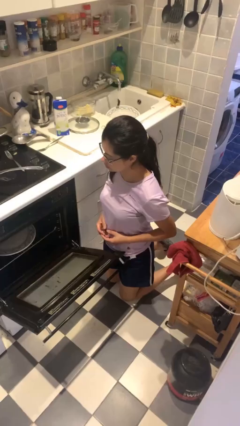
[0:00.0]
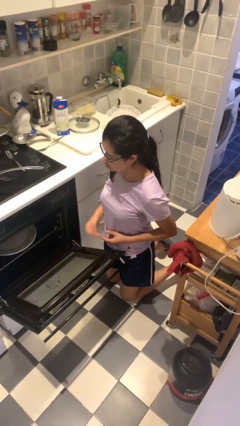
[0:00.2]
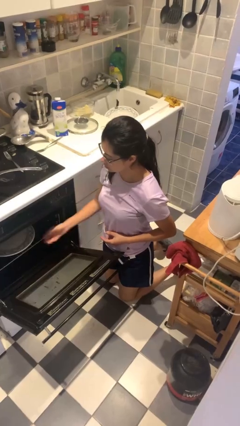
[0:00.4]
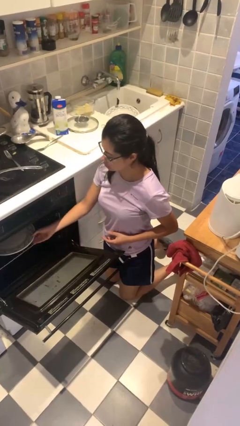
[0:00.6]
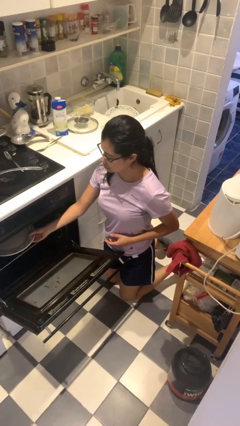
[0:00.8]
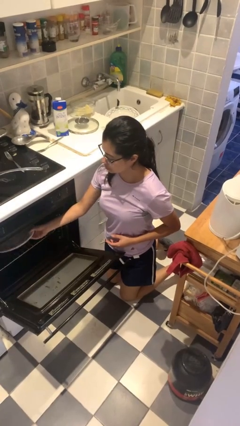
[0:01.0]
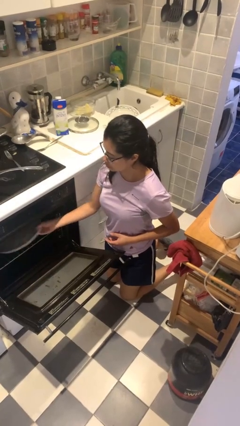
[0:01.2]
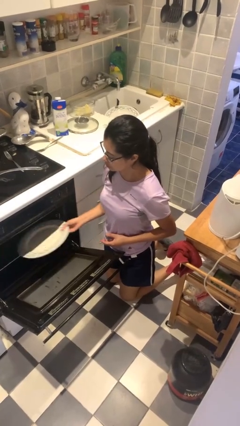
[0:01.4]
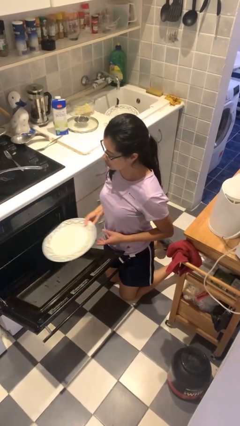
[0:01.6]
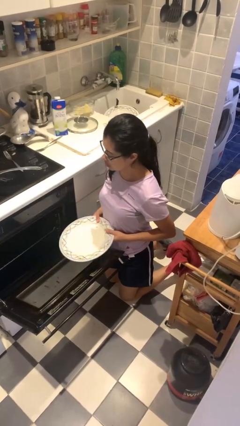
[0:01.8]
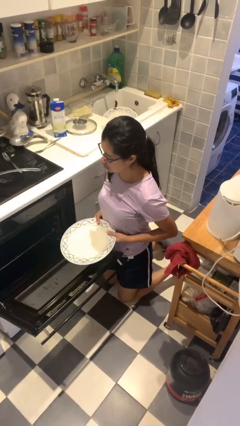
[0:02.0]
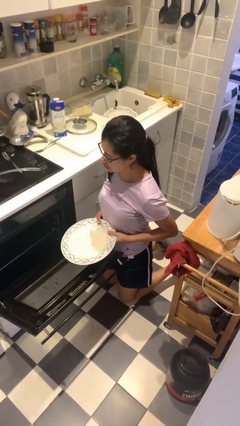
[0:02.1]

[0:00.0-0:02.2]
person unloads dishwasher

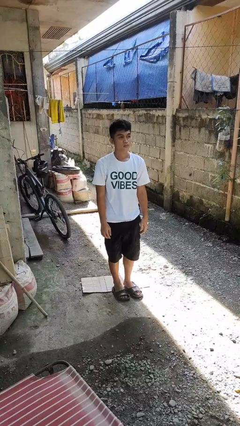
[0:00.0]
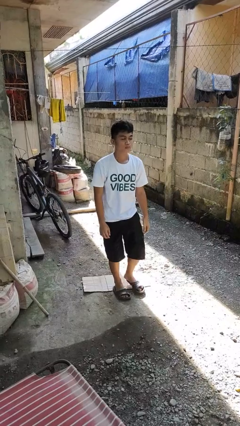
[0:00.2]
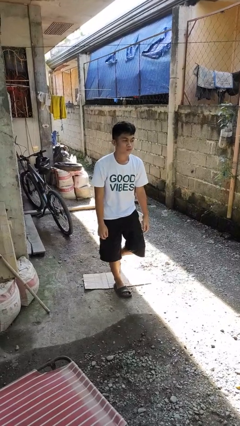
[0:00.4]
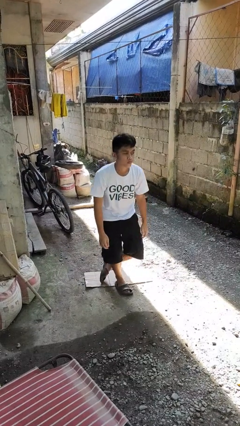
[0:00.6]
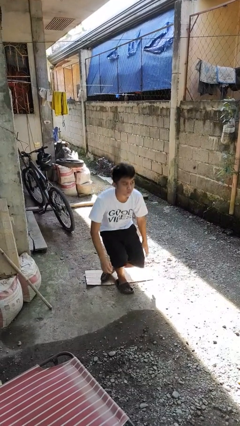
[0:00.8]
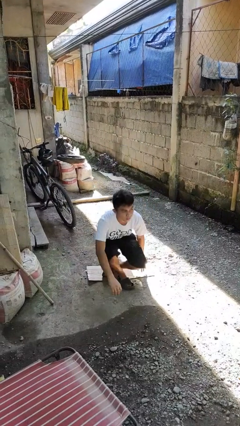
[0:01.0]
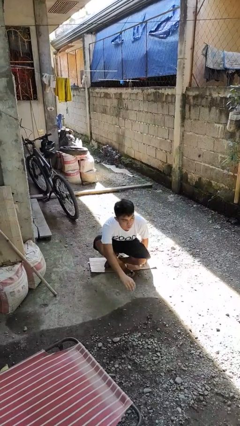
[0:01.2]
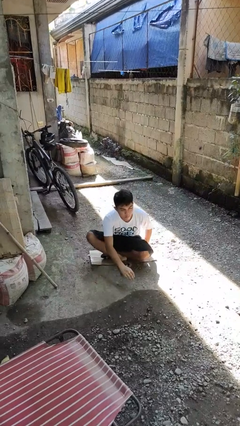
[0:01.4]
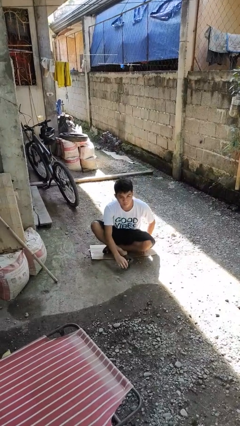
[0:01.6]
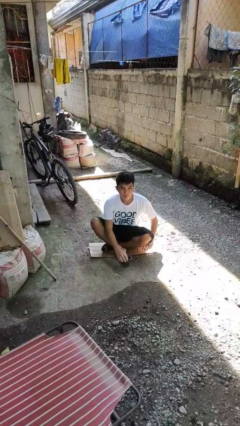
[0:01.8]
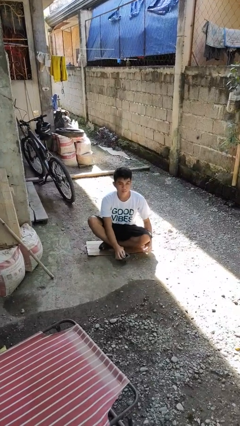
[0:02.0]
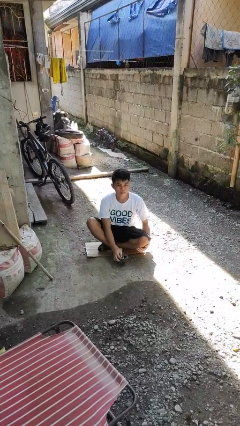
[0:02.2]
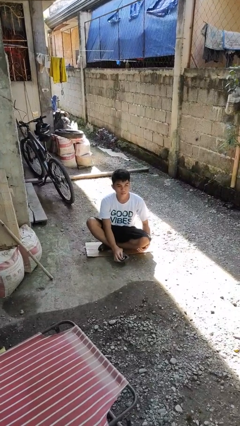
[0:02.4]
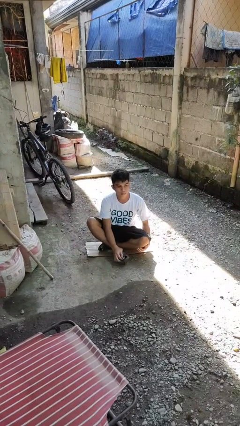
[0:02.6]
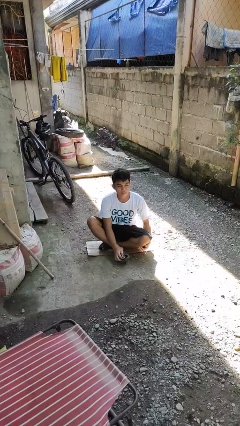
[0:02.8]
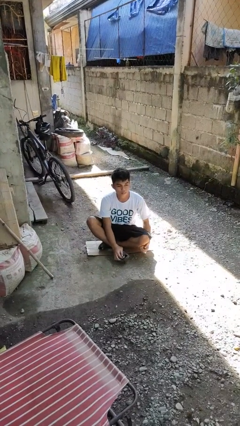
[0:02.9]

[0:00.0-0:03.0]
person sits crisscross

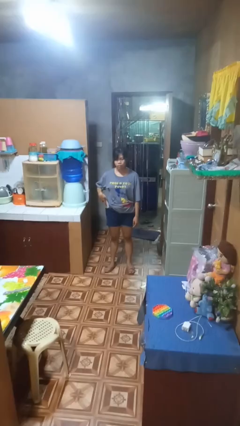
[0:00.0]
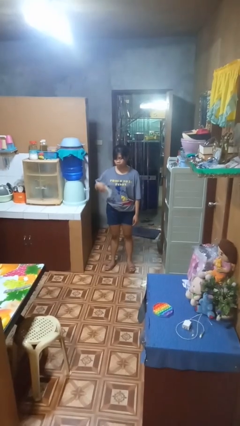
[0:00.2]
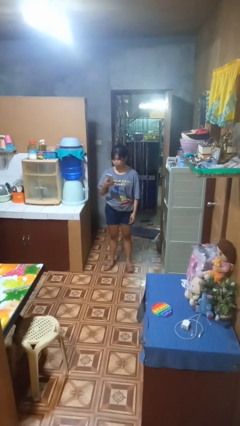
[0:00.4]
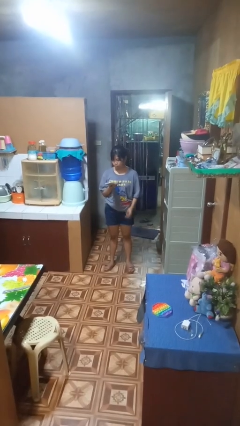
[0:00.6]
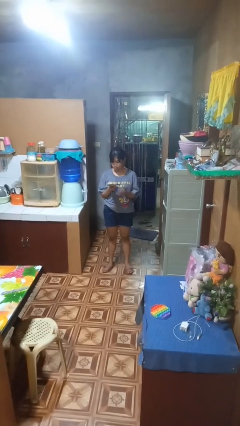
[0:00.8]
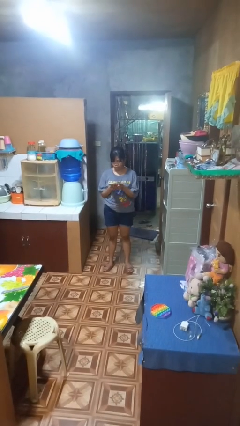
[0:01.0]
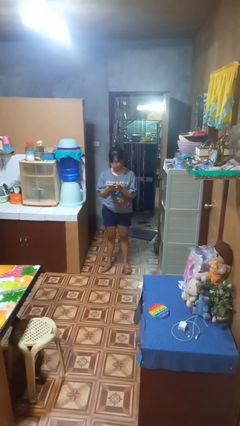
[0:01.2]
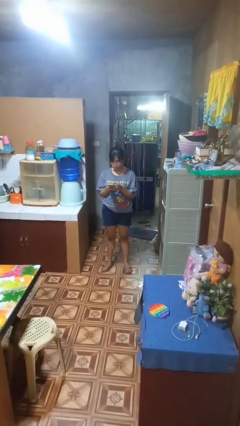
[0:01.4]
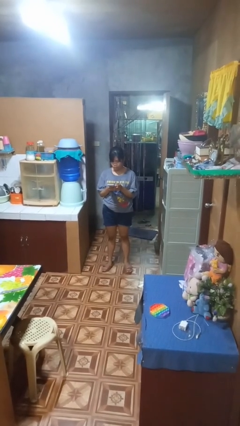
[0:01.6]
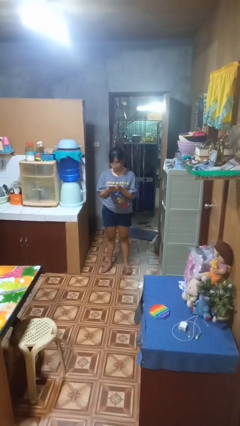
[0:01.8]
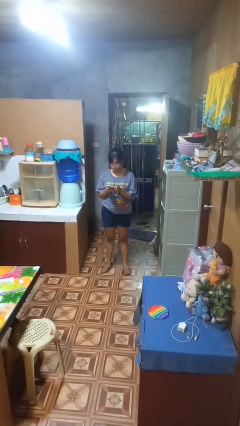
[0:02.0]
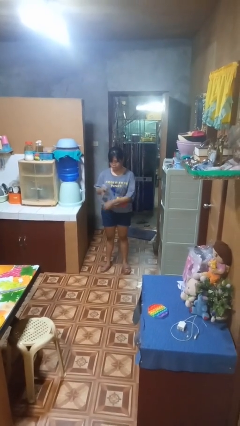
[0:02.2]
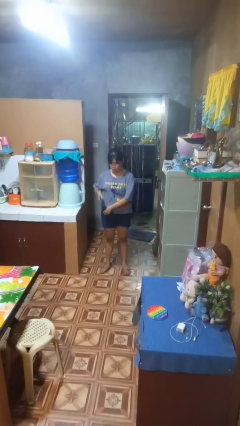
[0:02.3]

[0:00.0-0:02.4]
person takes phone from pocket

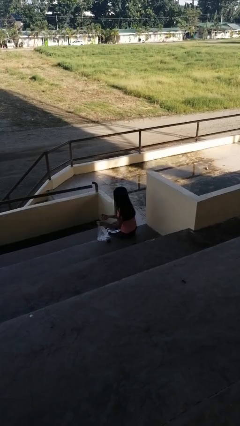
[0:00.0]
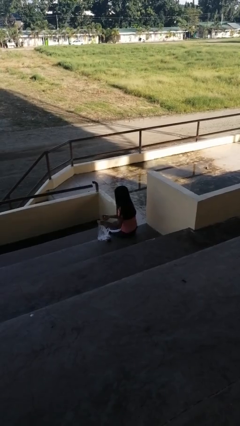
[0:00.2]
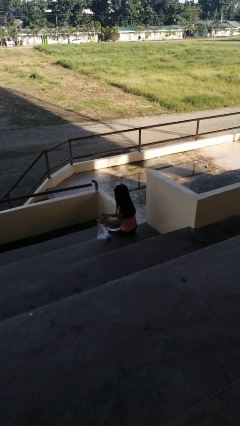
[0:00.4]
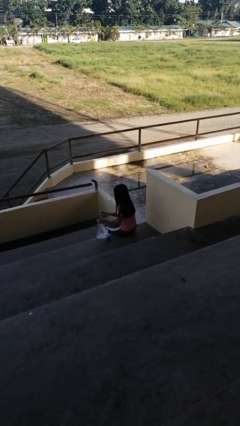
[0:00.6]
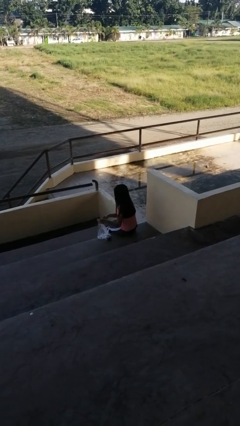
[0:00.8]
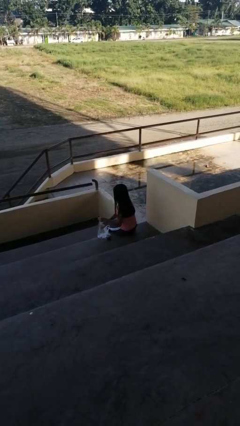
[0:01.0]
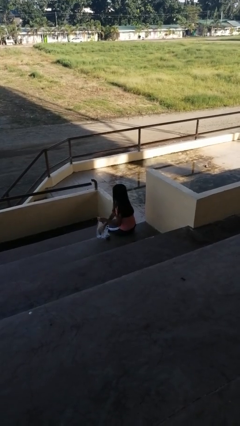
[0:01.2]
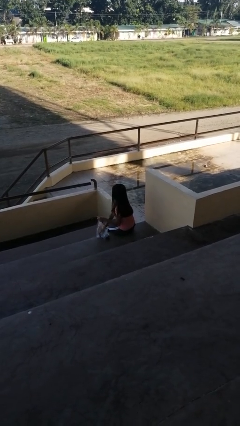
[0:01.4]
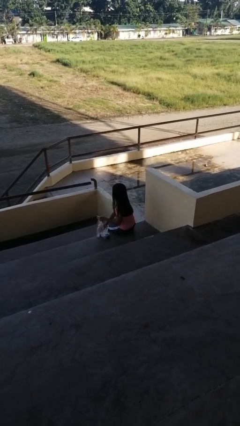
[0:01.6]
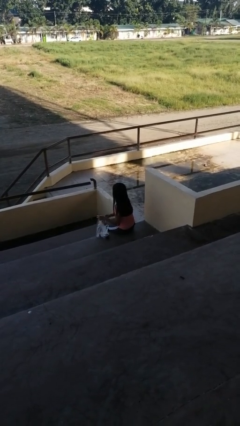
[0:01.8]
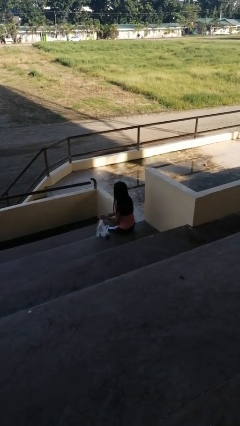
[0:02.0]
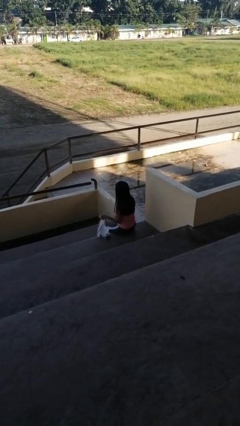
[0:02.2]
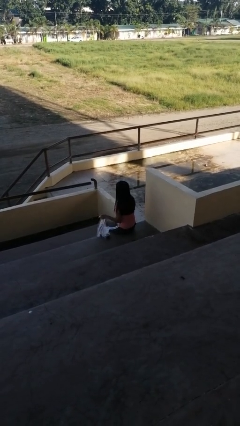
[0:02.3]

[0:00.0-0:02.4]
person puts object into bag

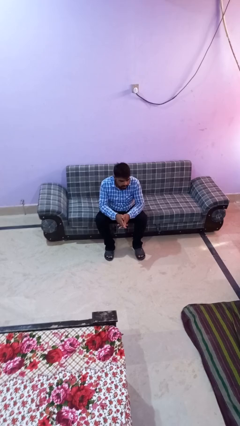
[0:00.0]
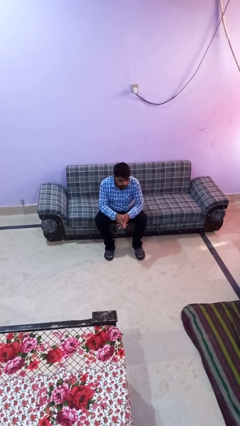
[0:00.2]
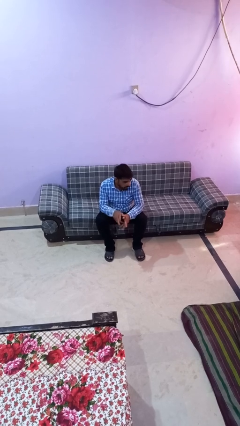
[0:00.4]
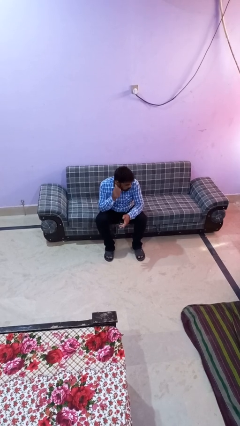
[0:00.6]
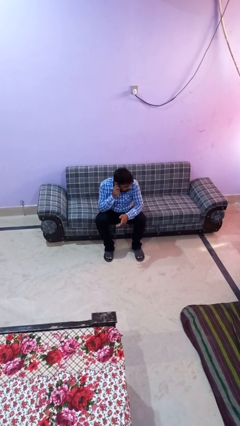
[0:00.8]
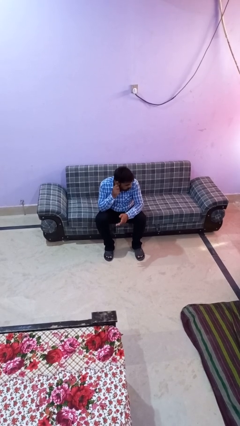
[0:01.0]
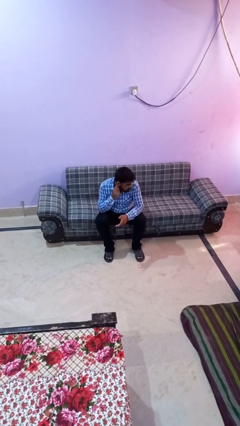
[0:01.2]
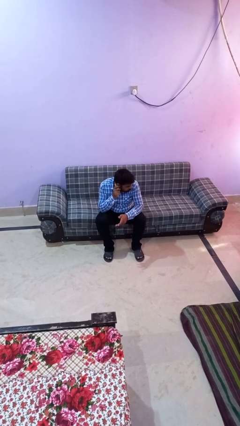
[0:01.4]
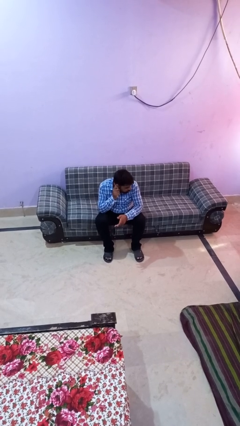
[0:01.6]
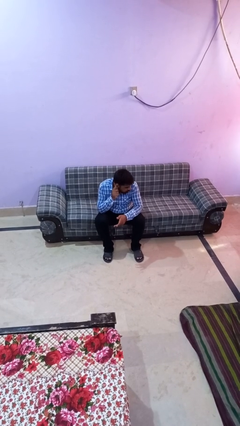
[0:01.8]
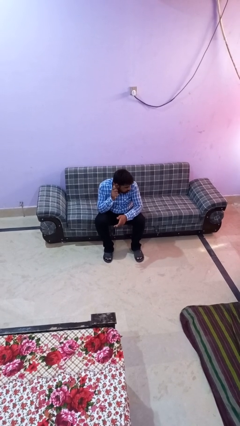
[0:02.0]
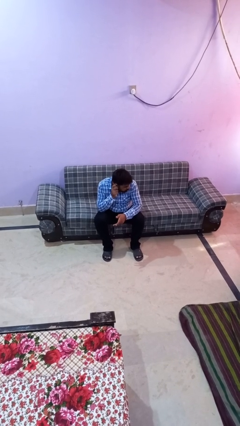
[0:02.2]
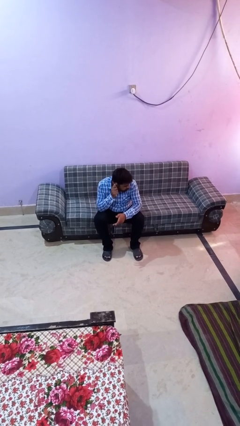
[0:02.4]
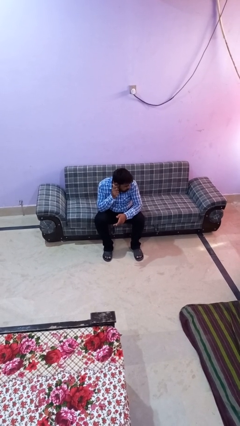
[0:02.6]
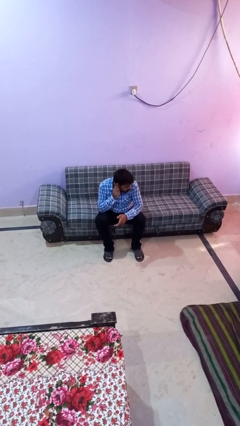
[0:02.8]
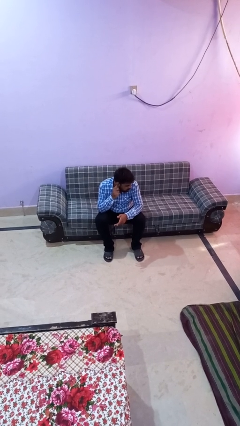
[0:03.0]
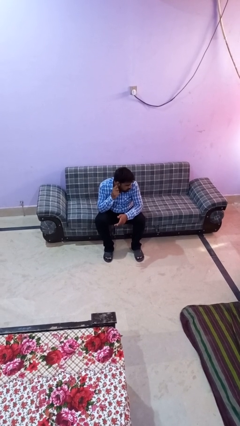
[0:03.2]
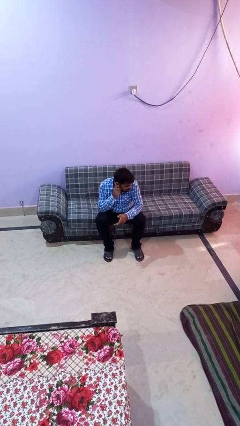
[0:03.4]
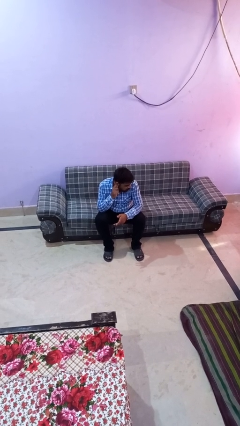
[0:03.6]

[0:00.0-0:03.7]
person touches earlobe

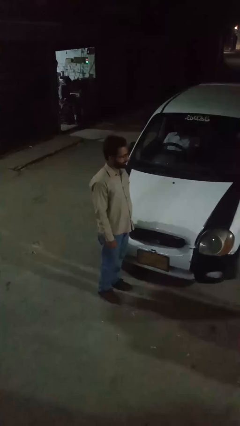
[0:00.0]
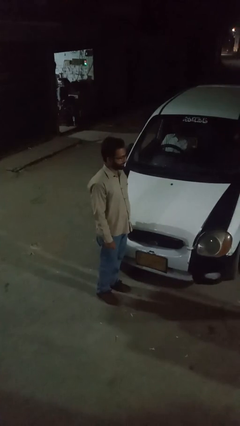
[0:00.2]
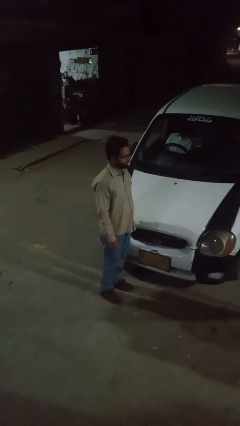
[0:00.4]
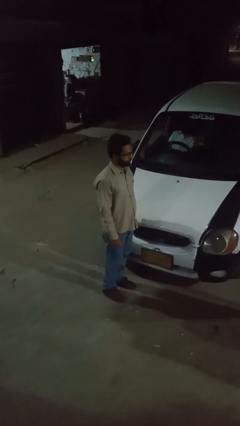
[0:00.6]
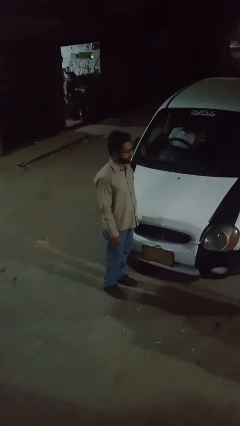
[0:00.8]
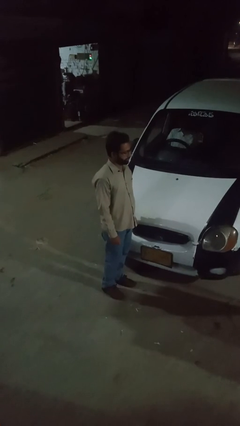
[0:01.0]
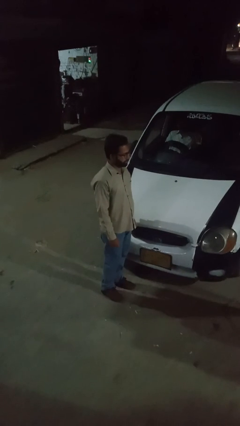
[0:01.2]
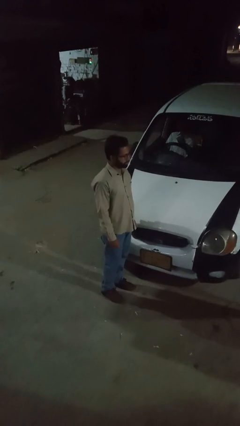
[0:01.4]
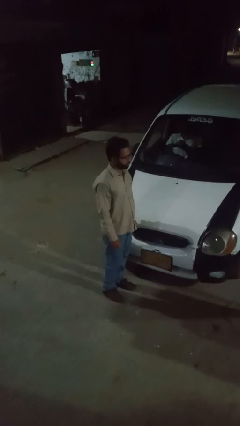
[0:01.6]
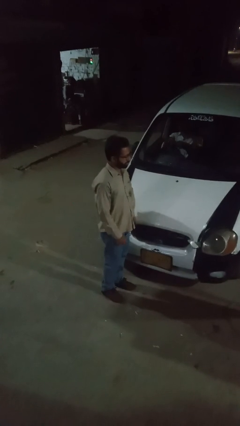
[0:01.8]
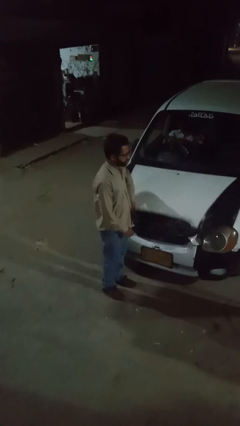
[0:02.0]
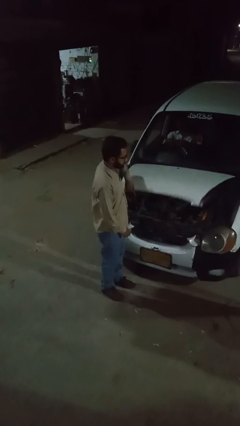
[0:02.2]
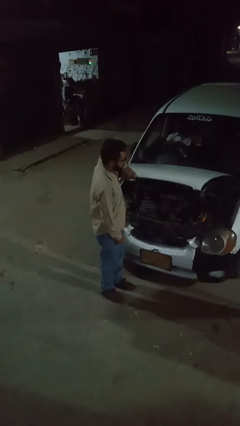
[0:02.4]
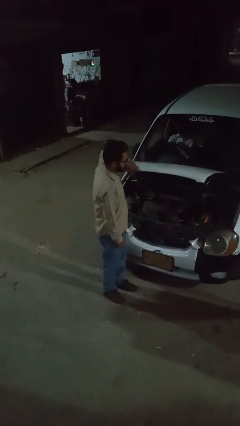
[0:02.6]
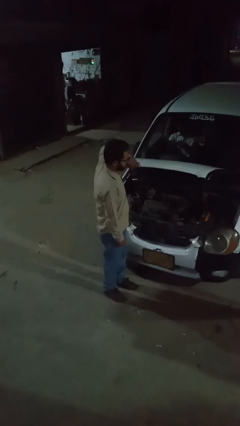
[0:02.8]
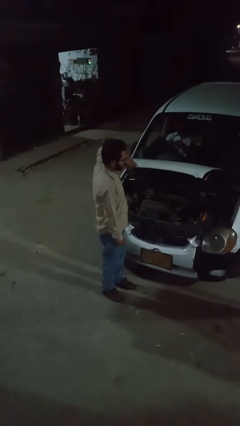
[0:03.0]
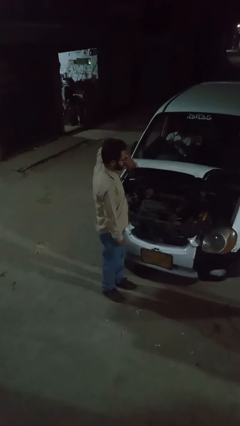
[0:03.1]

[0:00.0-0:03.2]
person opens car hood

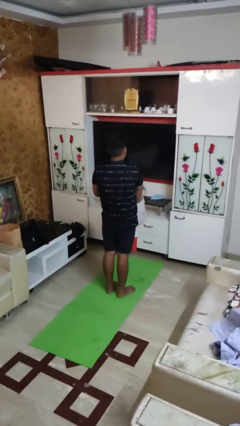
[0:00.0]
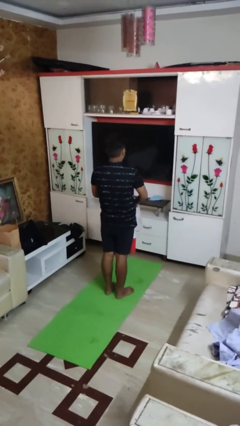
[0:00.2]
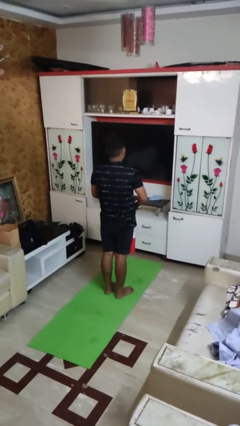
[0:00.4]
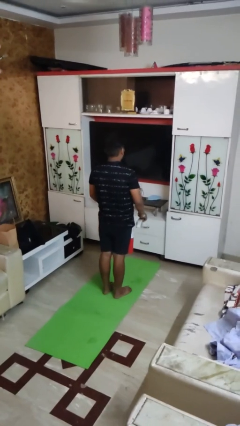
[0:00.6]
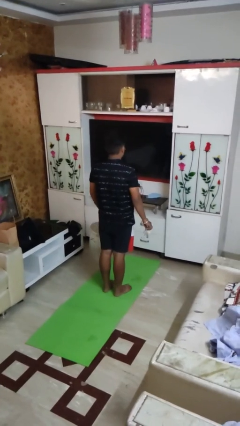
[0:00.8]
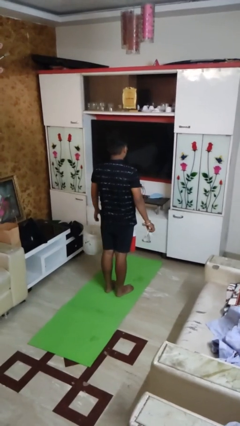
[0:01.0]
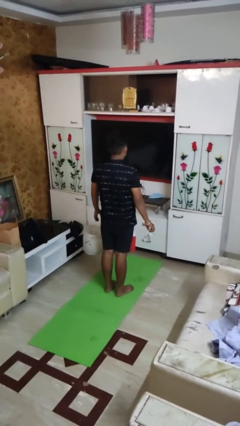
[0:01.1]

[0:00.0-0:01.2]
person takes object from basket
